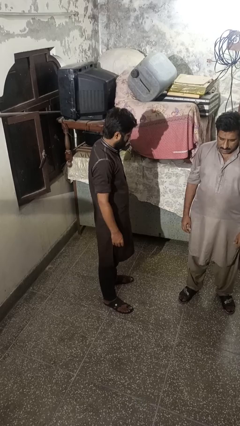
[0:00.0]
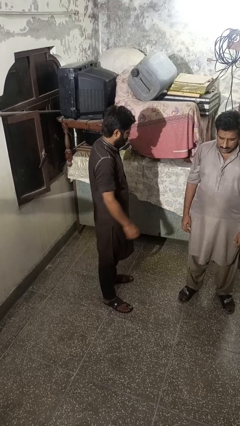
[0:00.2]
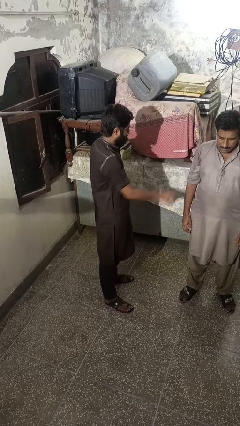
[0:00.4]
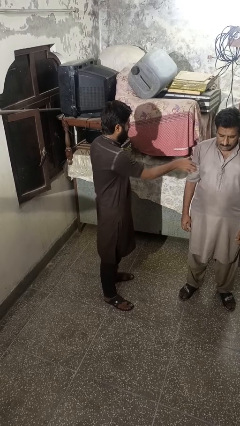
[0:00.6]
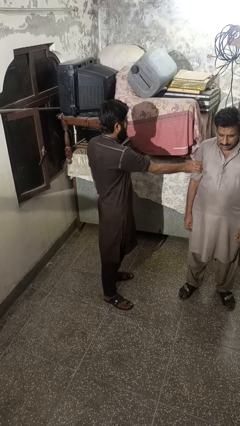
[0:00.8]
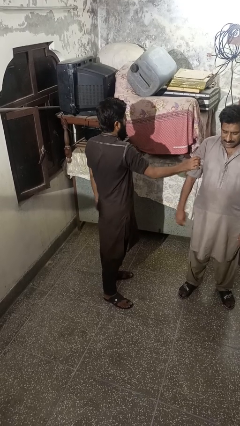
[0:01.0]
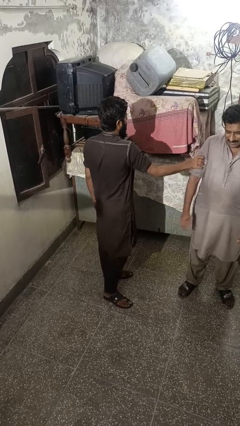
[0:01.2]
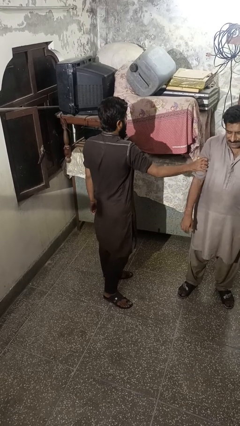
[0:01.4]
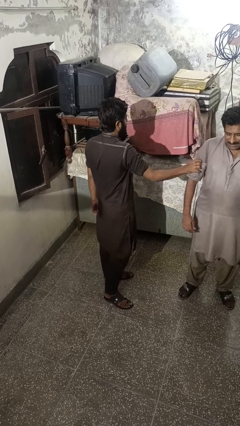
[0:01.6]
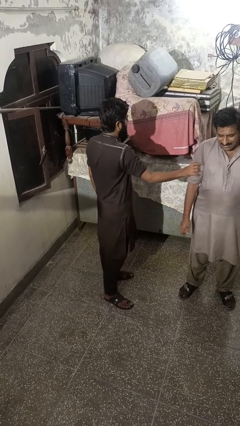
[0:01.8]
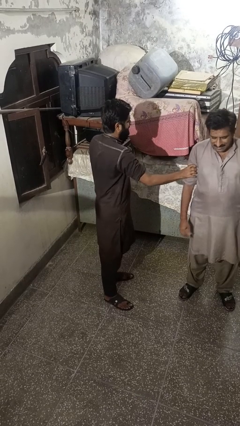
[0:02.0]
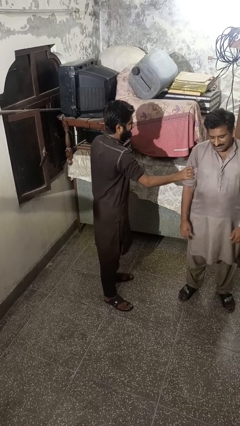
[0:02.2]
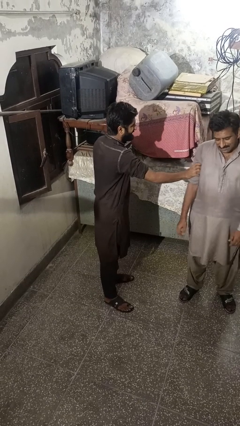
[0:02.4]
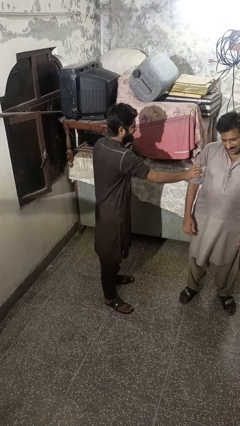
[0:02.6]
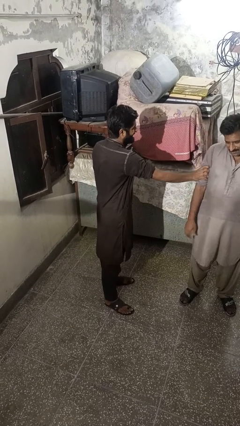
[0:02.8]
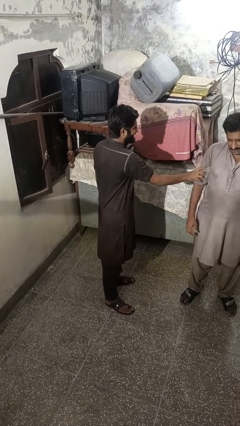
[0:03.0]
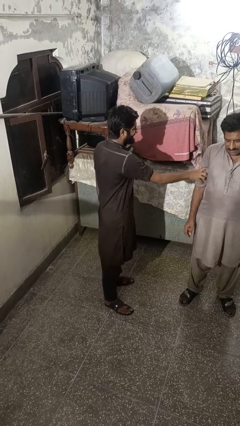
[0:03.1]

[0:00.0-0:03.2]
person grabs person by bicep

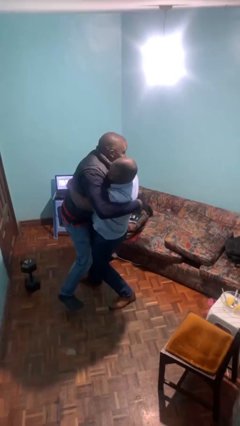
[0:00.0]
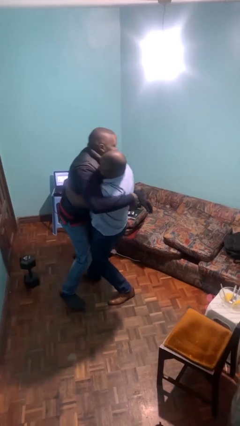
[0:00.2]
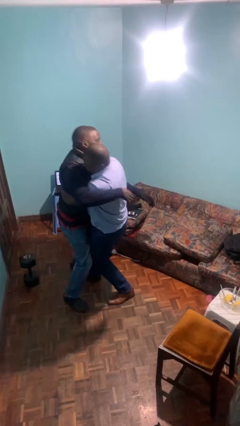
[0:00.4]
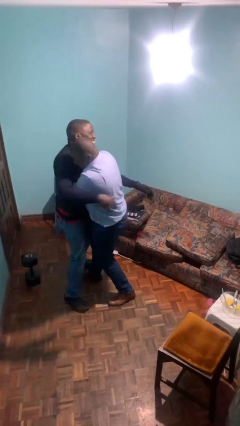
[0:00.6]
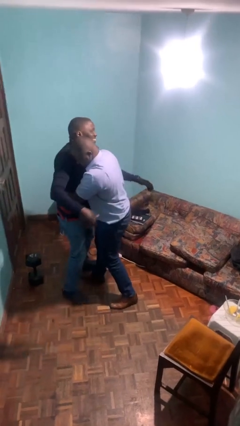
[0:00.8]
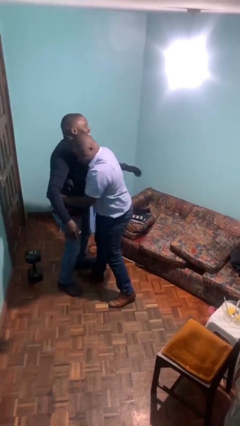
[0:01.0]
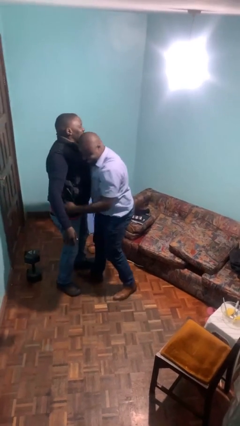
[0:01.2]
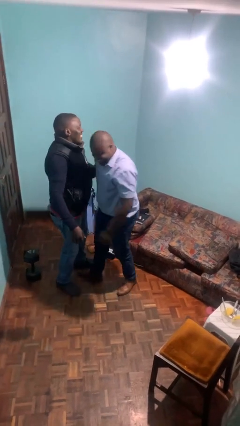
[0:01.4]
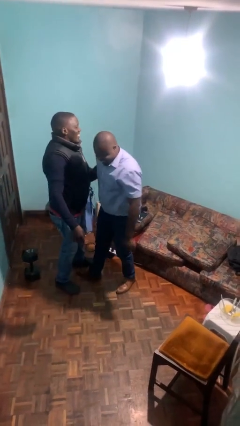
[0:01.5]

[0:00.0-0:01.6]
person puts down person

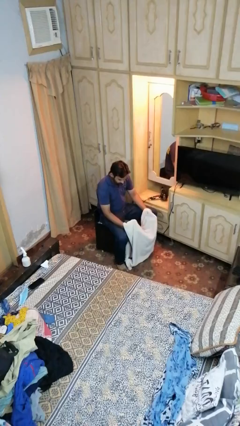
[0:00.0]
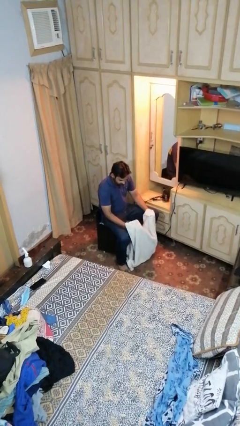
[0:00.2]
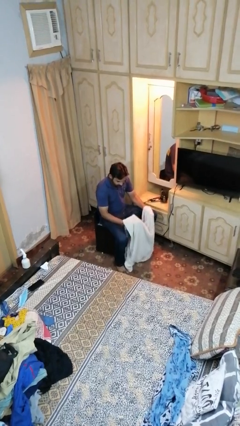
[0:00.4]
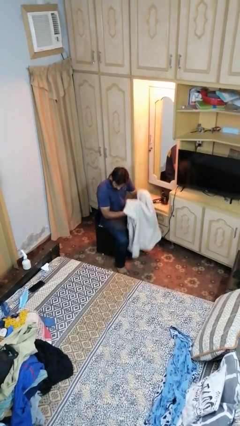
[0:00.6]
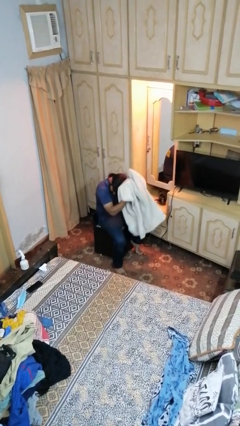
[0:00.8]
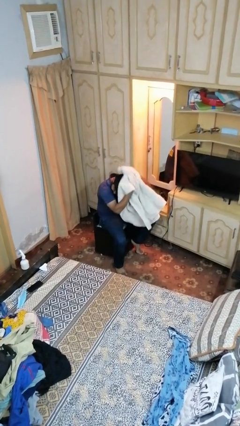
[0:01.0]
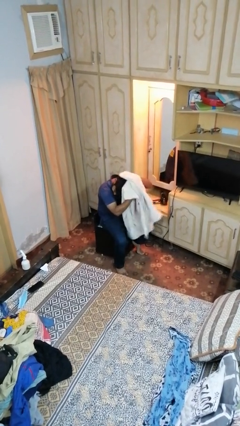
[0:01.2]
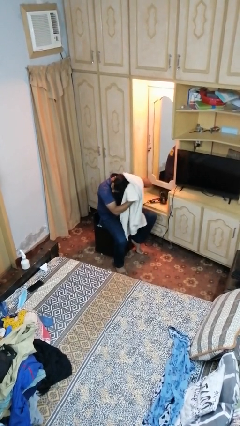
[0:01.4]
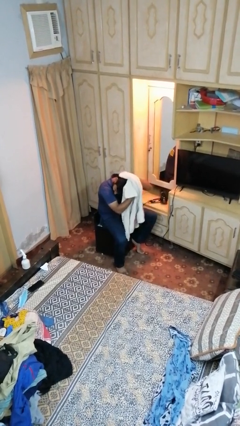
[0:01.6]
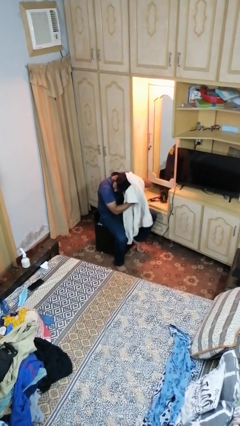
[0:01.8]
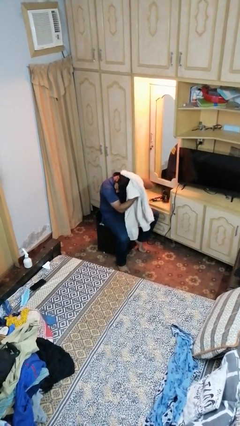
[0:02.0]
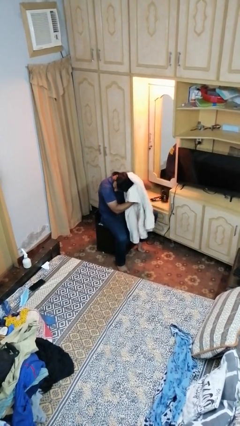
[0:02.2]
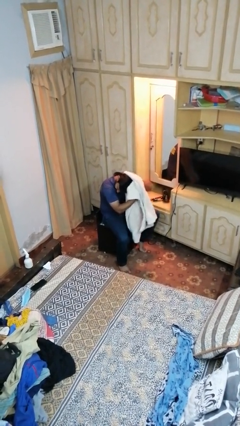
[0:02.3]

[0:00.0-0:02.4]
person dries hair with towel

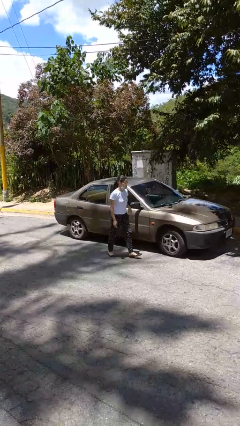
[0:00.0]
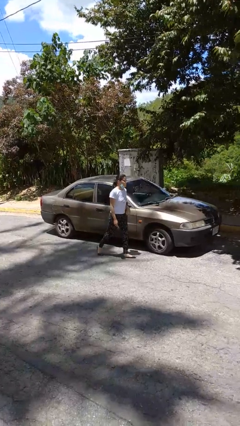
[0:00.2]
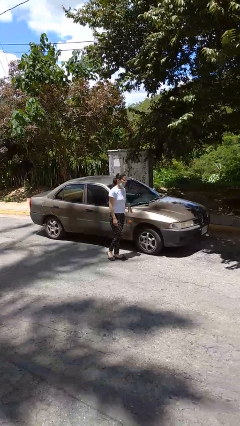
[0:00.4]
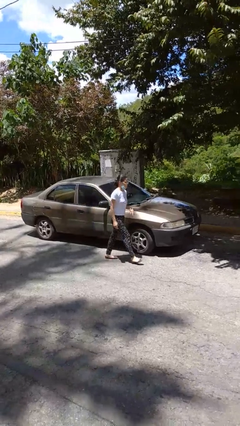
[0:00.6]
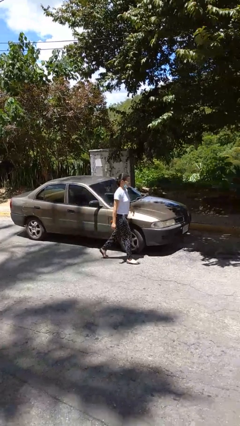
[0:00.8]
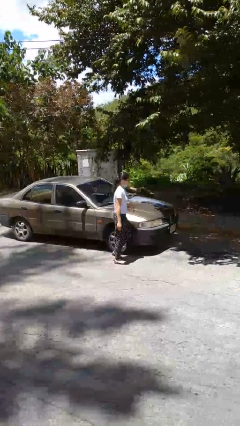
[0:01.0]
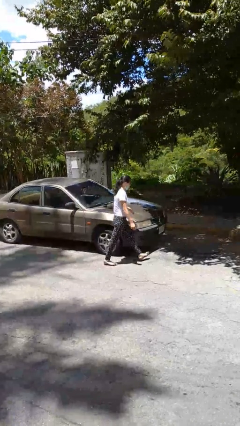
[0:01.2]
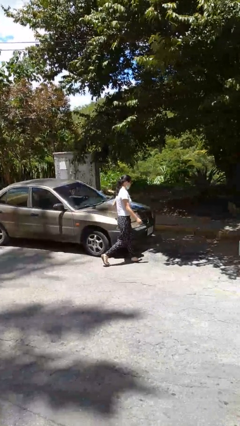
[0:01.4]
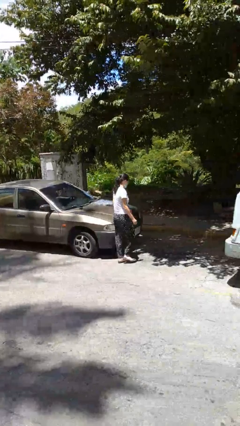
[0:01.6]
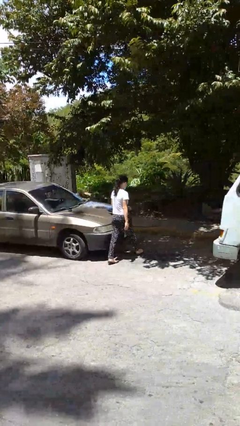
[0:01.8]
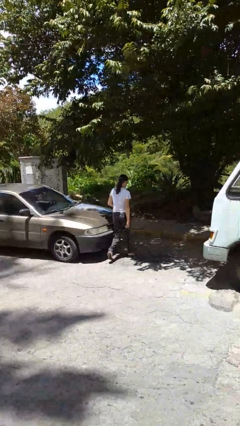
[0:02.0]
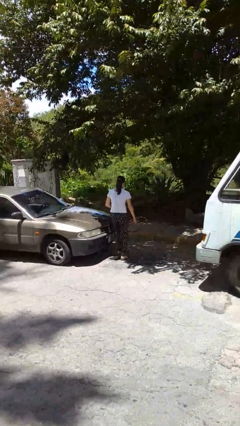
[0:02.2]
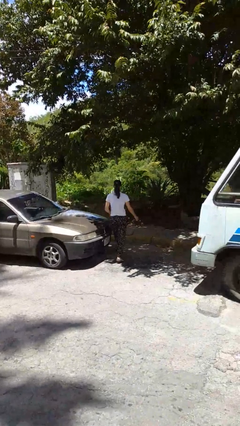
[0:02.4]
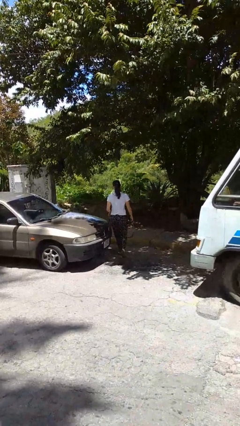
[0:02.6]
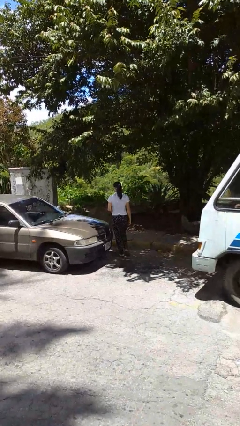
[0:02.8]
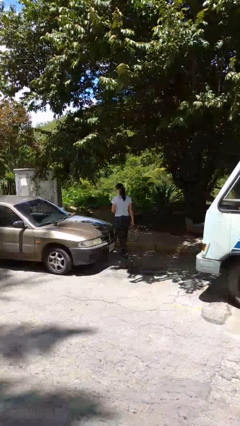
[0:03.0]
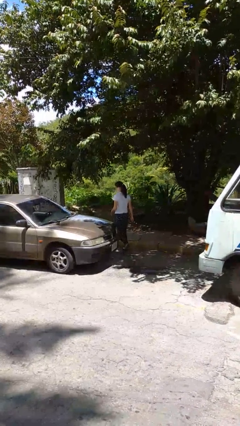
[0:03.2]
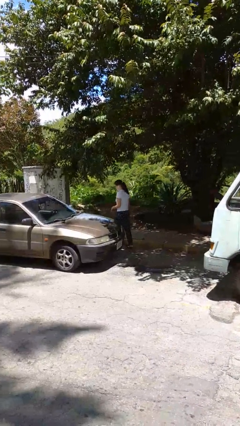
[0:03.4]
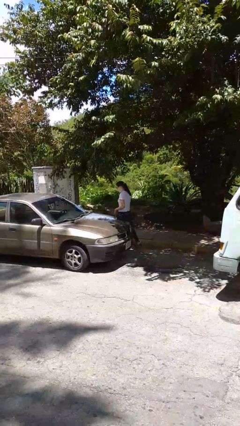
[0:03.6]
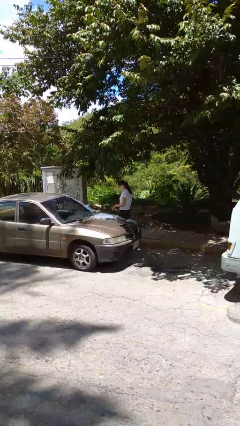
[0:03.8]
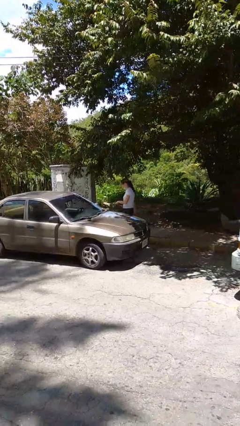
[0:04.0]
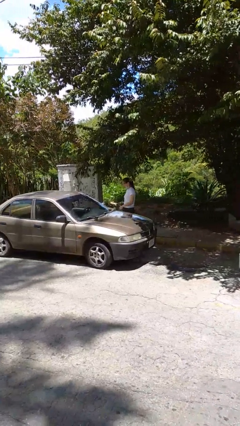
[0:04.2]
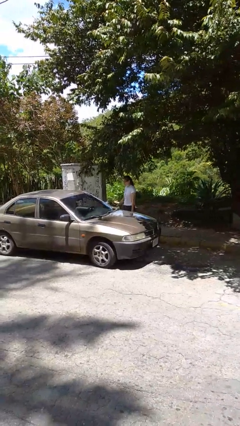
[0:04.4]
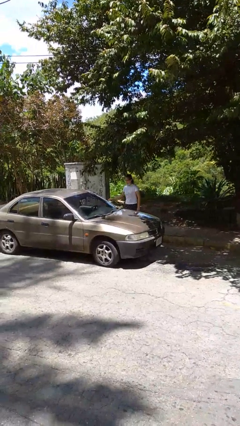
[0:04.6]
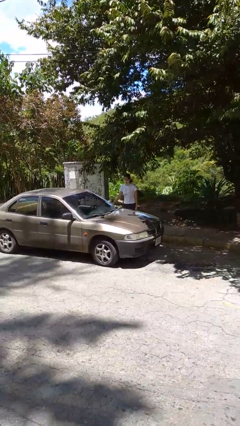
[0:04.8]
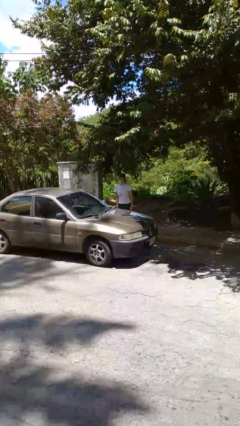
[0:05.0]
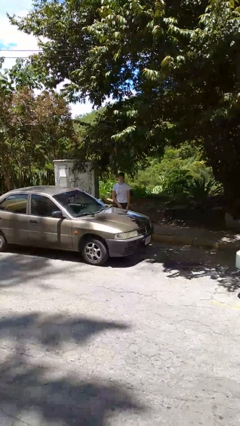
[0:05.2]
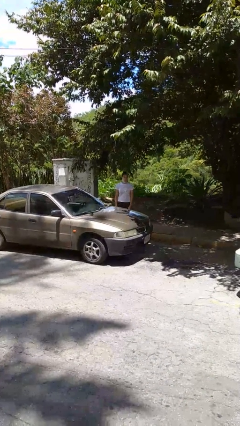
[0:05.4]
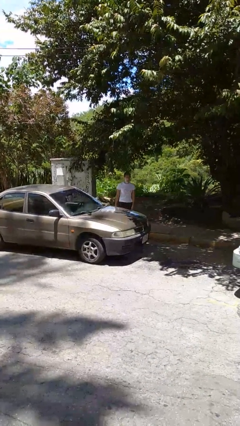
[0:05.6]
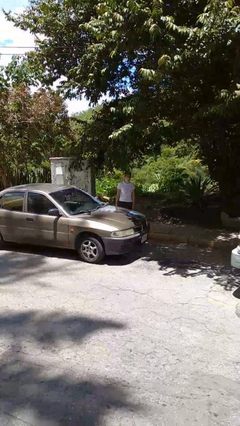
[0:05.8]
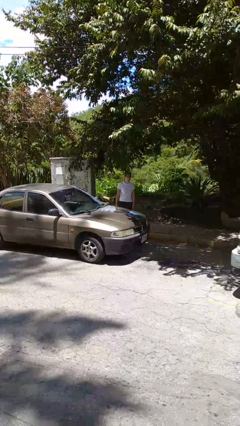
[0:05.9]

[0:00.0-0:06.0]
person walks around car

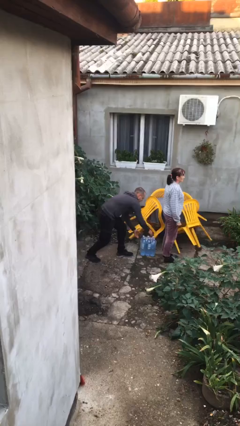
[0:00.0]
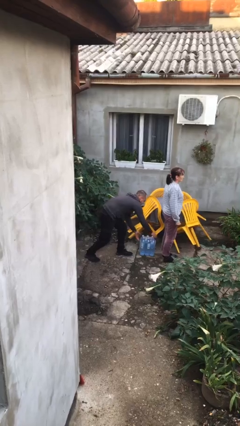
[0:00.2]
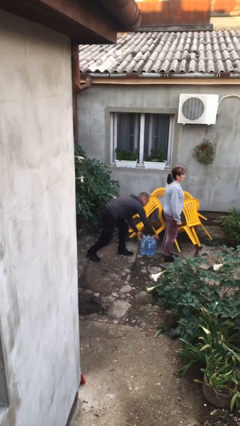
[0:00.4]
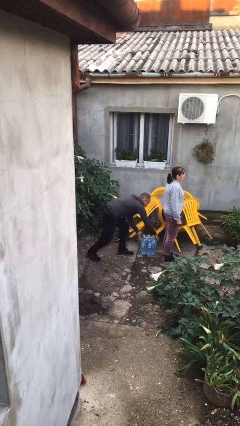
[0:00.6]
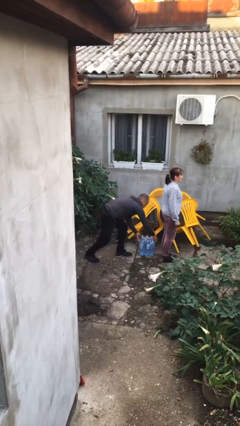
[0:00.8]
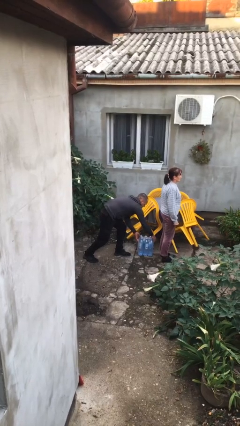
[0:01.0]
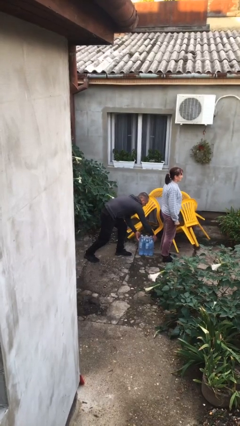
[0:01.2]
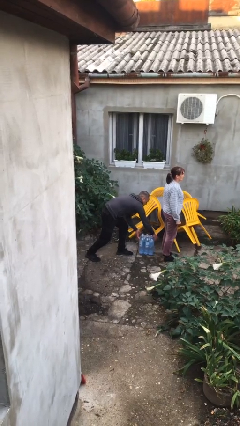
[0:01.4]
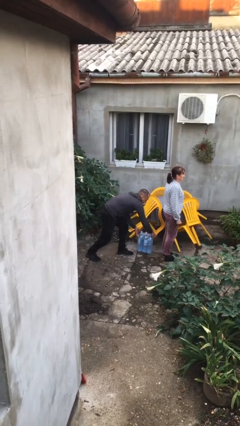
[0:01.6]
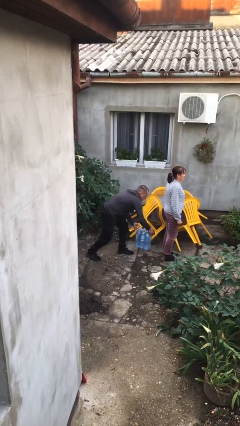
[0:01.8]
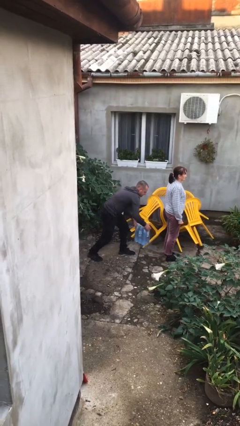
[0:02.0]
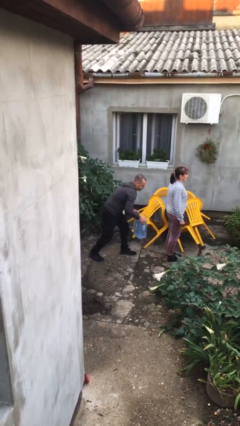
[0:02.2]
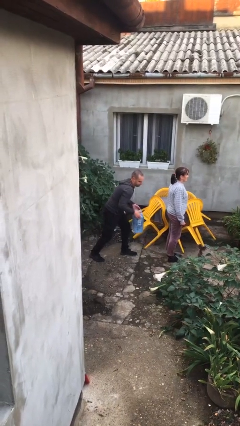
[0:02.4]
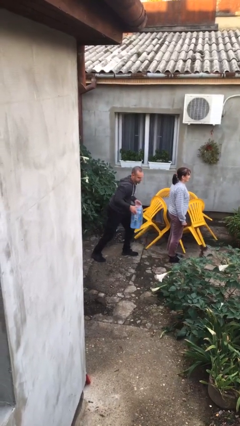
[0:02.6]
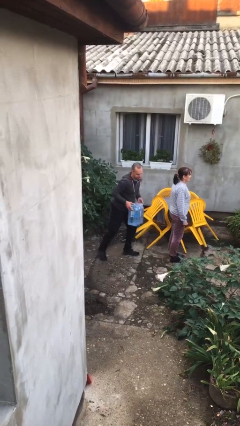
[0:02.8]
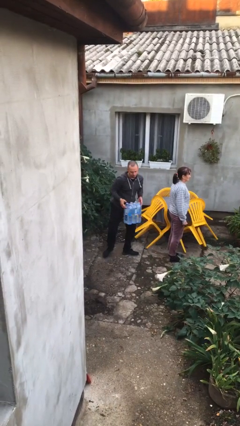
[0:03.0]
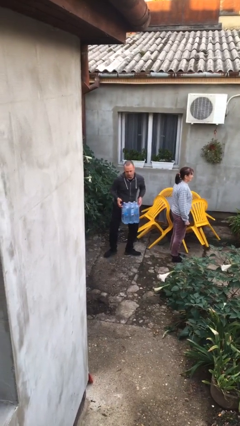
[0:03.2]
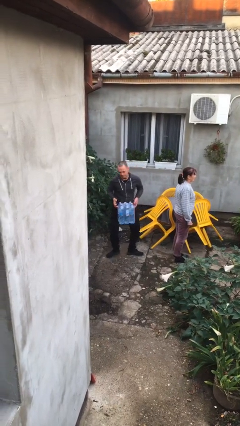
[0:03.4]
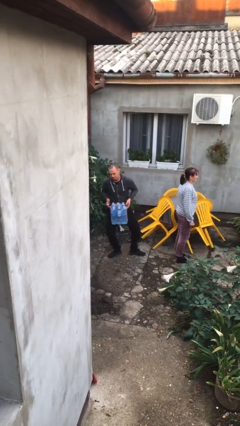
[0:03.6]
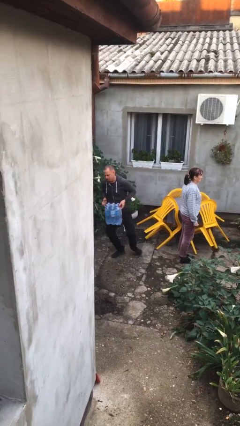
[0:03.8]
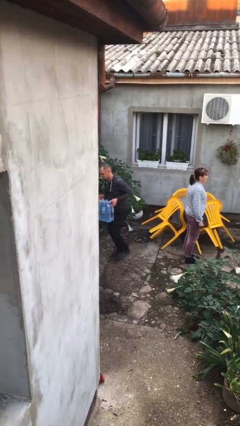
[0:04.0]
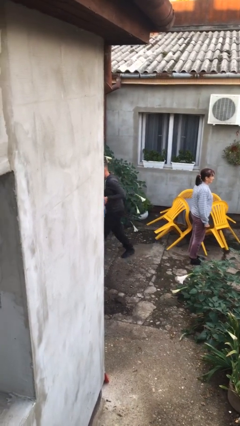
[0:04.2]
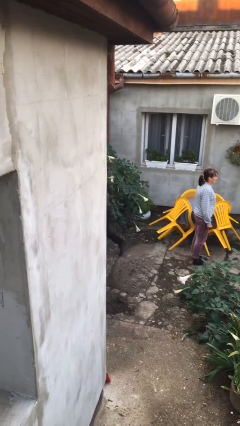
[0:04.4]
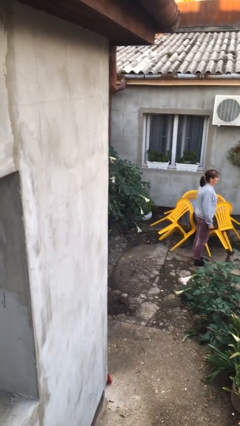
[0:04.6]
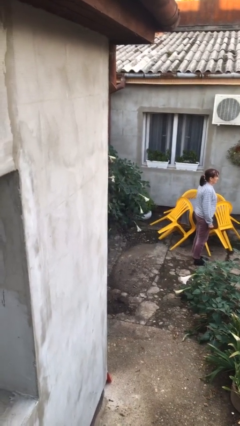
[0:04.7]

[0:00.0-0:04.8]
person steals object from person
